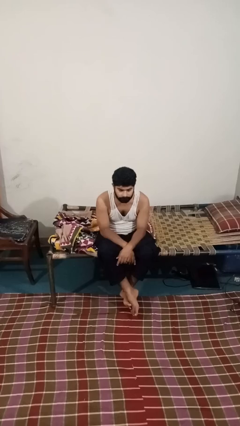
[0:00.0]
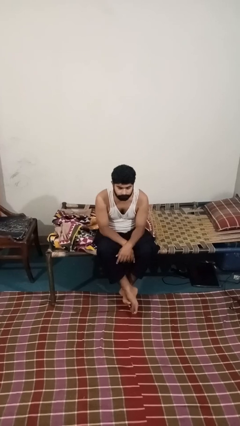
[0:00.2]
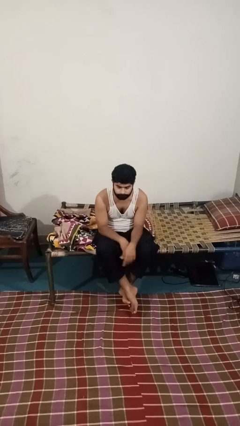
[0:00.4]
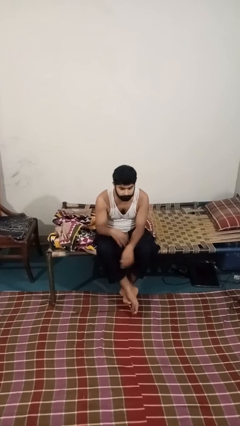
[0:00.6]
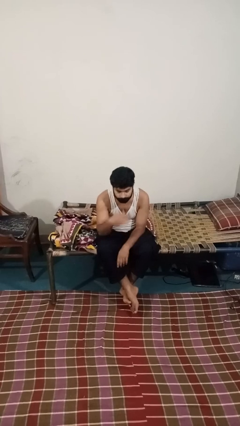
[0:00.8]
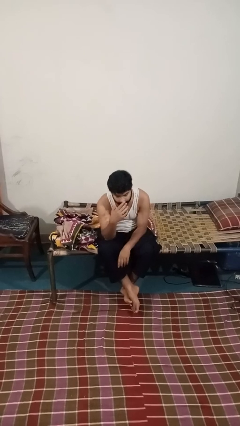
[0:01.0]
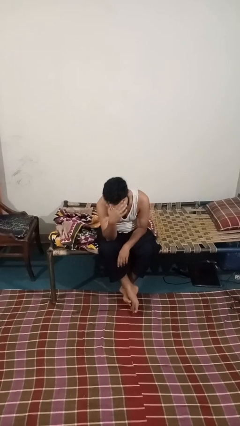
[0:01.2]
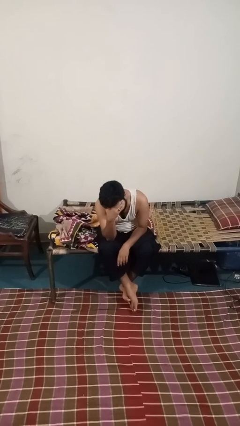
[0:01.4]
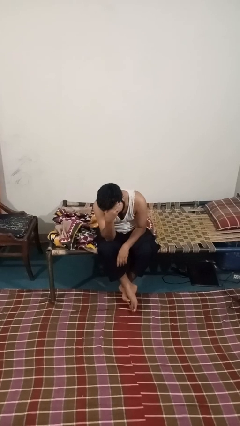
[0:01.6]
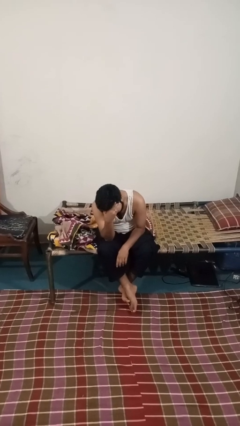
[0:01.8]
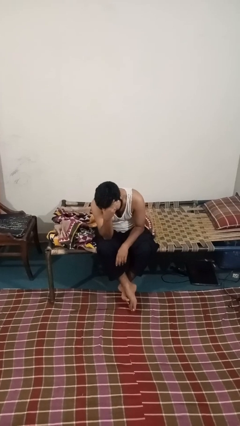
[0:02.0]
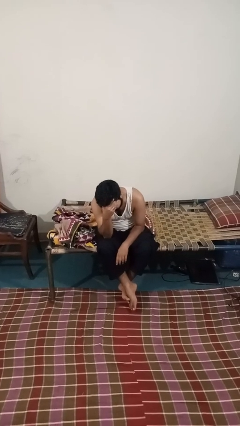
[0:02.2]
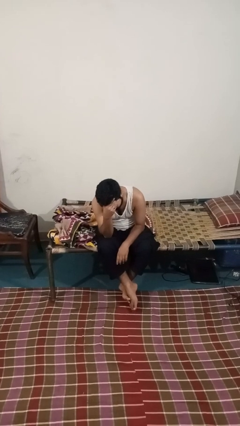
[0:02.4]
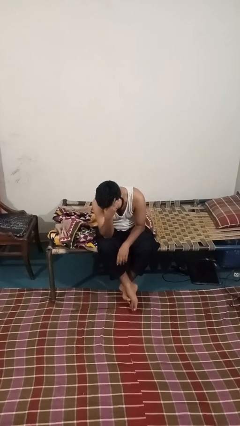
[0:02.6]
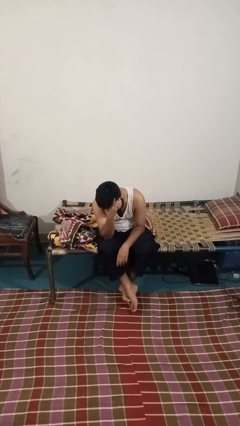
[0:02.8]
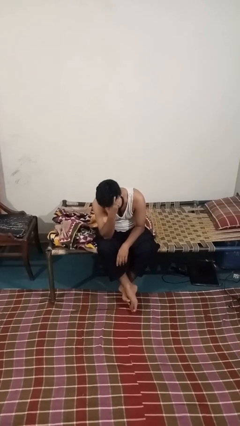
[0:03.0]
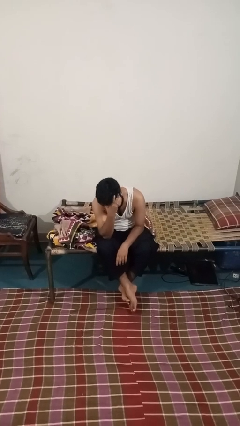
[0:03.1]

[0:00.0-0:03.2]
person covers face with hands

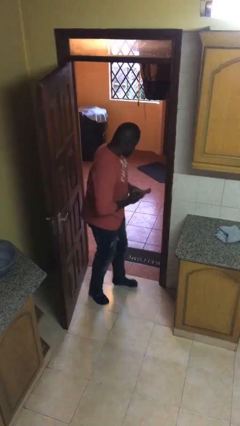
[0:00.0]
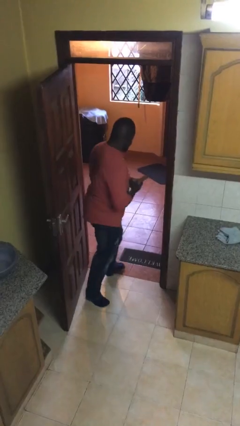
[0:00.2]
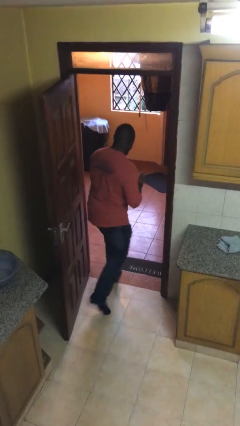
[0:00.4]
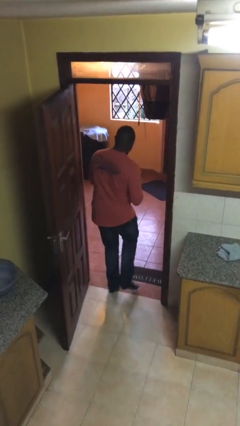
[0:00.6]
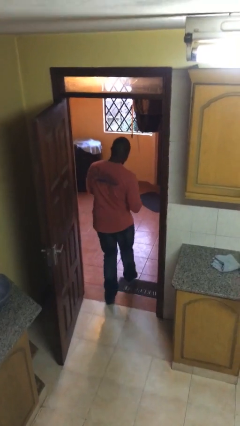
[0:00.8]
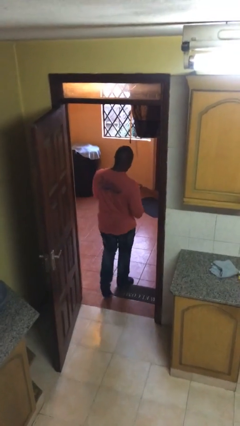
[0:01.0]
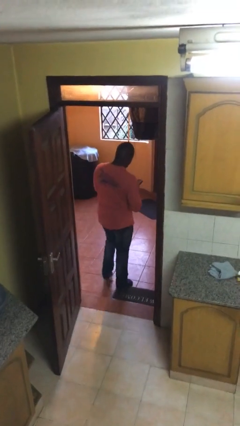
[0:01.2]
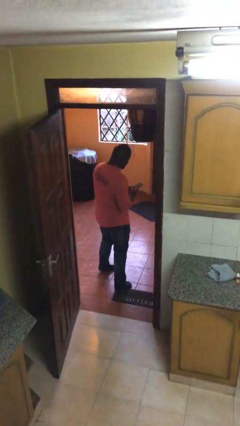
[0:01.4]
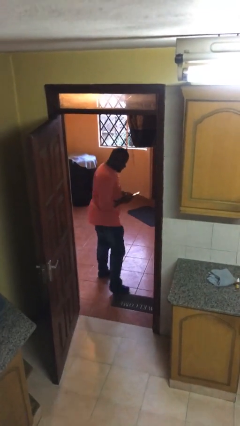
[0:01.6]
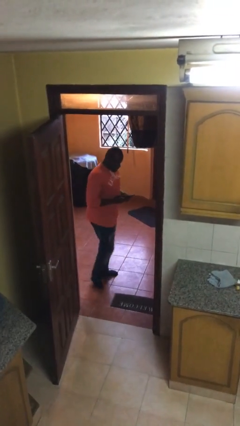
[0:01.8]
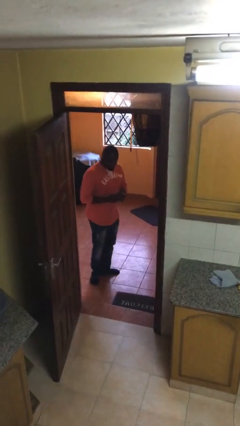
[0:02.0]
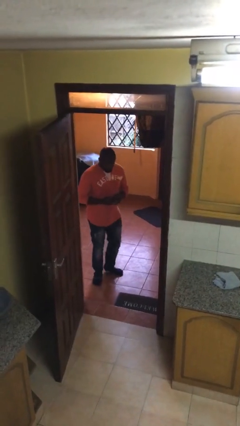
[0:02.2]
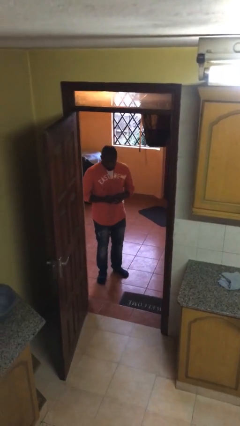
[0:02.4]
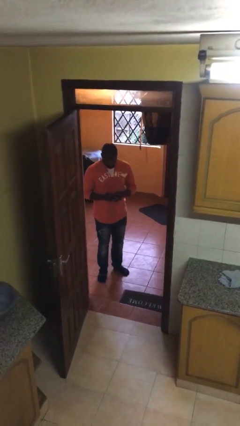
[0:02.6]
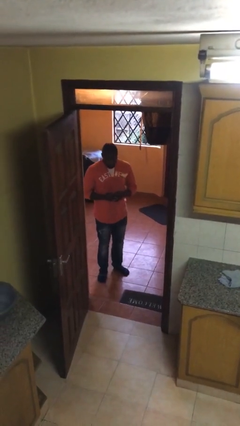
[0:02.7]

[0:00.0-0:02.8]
person exits scene through structure

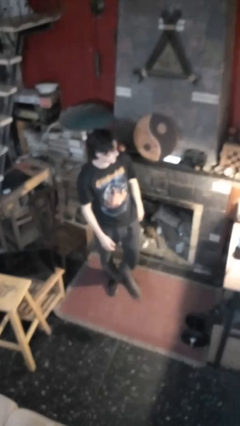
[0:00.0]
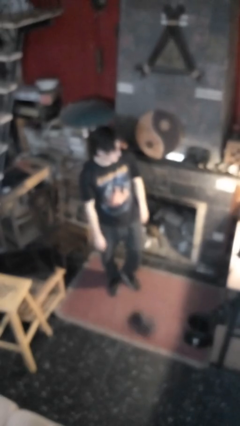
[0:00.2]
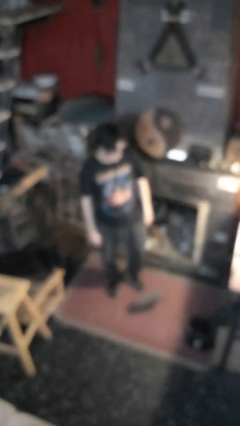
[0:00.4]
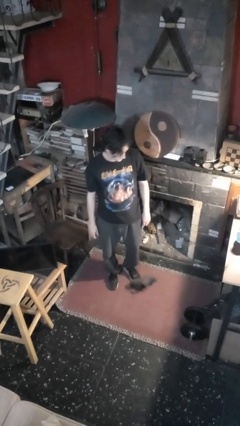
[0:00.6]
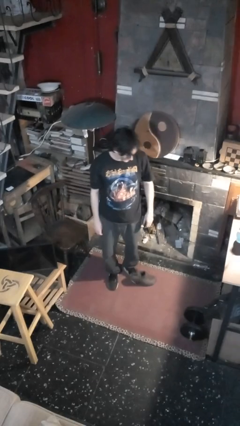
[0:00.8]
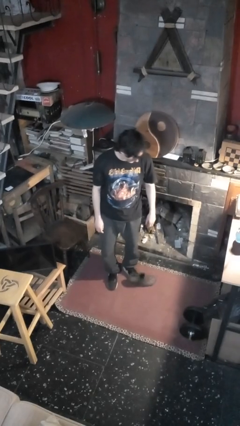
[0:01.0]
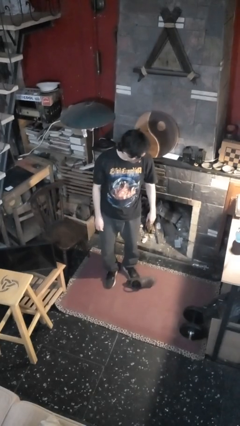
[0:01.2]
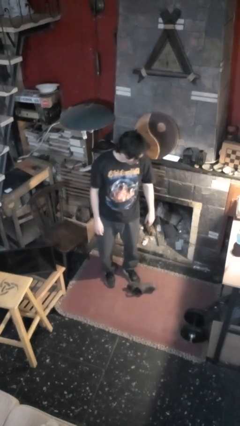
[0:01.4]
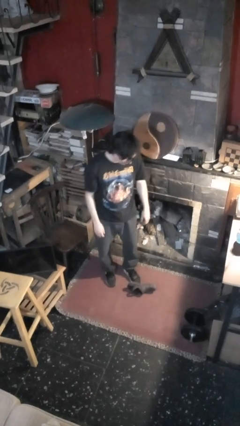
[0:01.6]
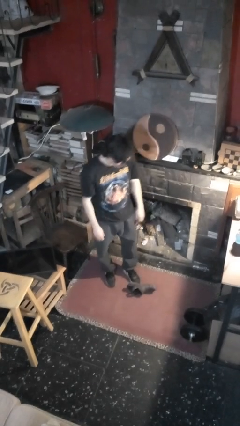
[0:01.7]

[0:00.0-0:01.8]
person drops object

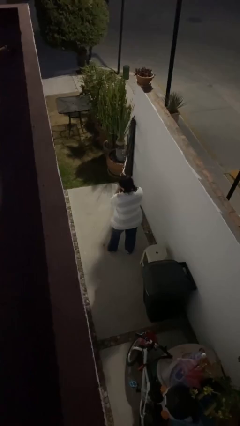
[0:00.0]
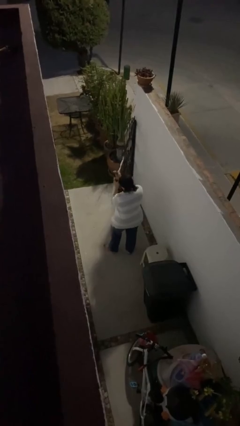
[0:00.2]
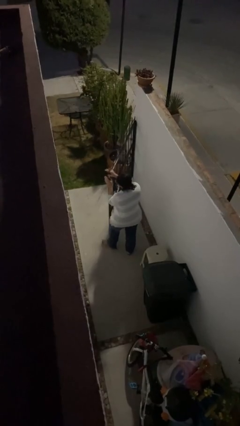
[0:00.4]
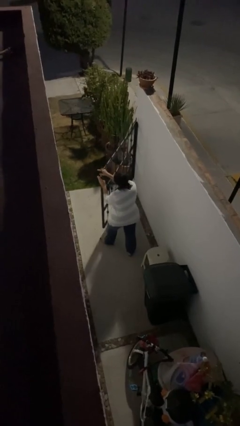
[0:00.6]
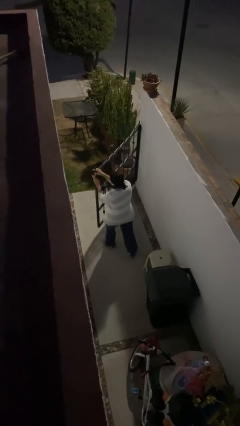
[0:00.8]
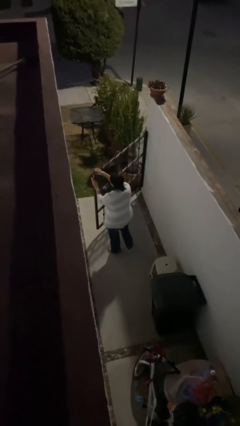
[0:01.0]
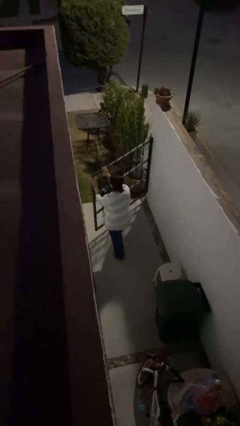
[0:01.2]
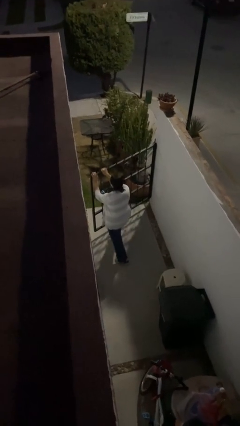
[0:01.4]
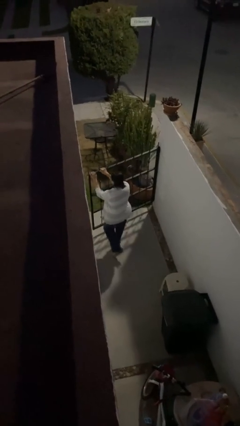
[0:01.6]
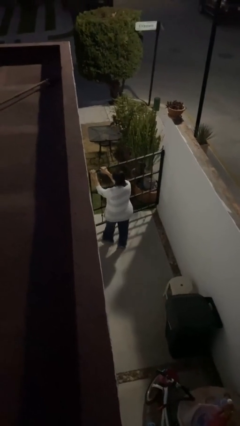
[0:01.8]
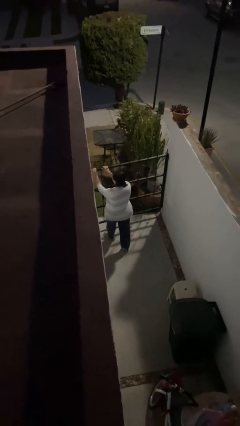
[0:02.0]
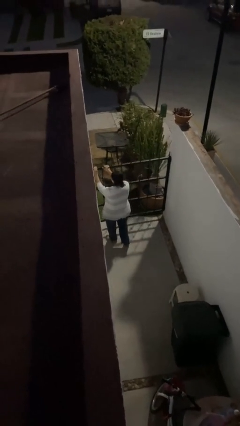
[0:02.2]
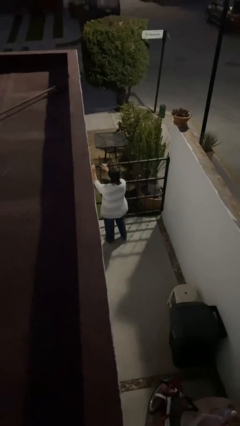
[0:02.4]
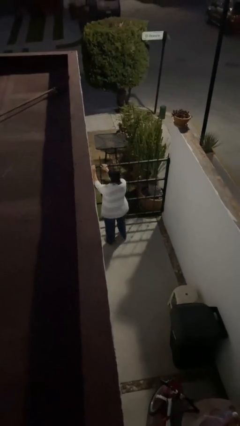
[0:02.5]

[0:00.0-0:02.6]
person closes facility door

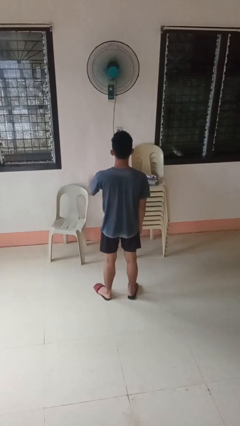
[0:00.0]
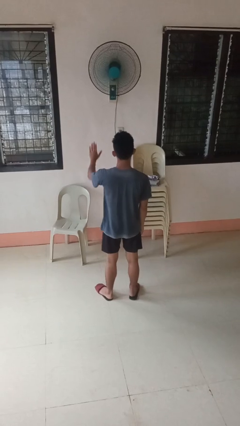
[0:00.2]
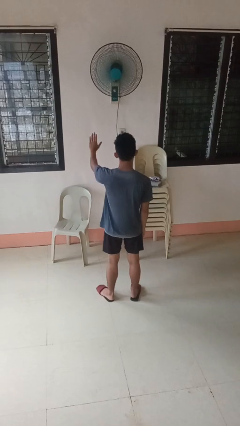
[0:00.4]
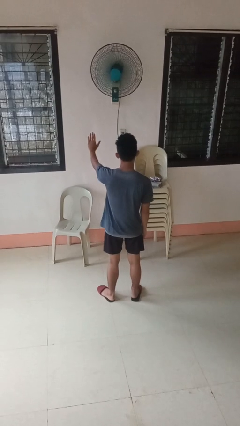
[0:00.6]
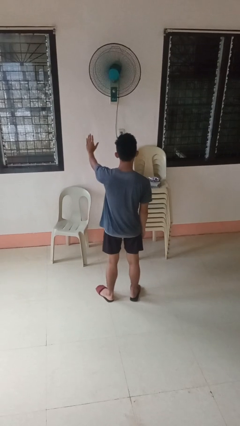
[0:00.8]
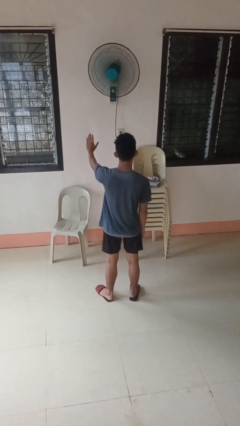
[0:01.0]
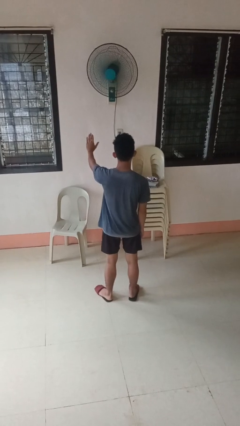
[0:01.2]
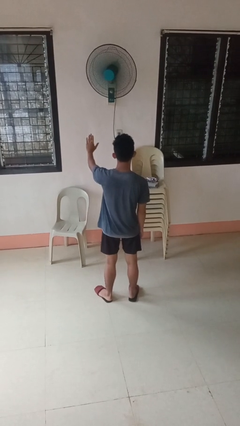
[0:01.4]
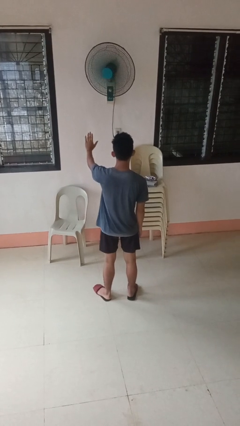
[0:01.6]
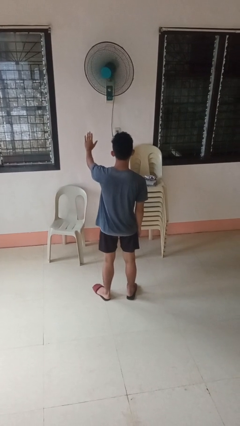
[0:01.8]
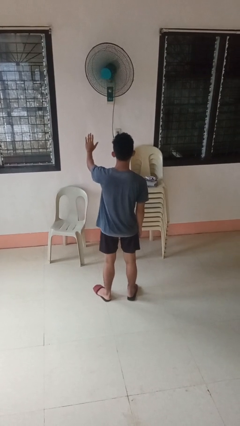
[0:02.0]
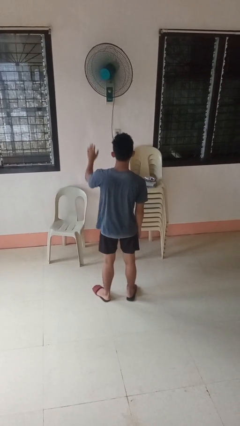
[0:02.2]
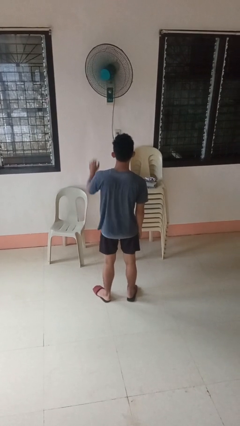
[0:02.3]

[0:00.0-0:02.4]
person gestures stop

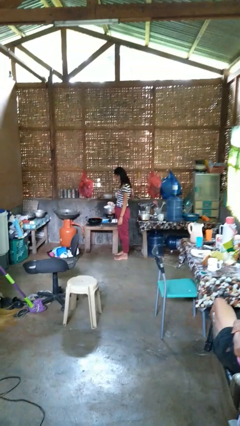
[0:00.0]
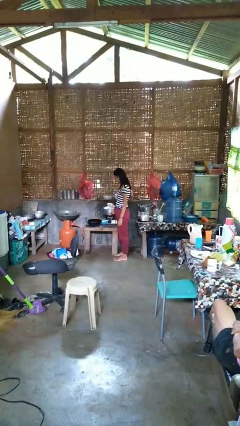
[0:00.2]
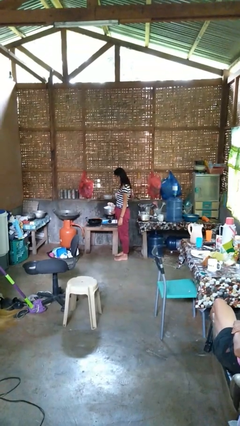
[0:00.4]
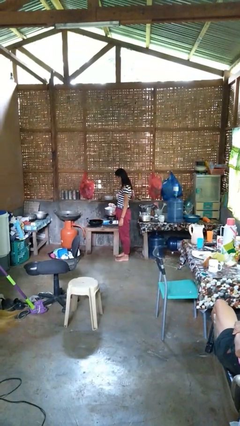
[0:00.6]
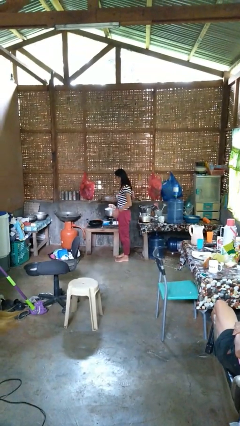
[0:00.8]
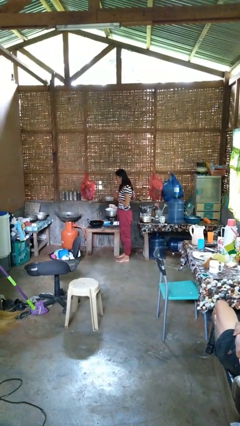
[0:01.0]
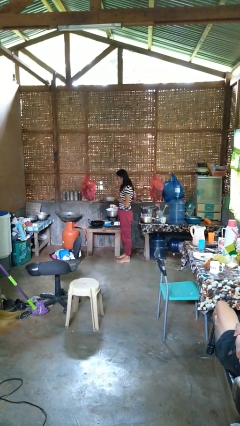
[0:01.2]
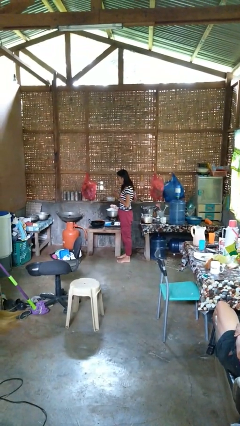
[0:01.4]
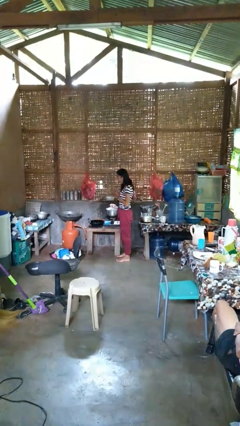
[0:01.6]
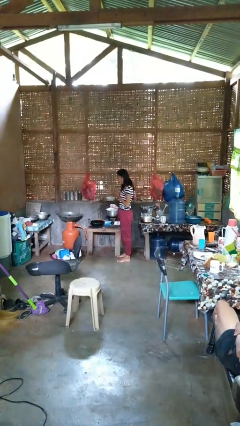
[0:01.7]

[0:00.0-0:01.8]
person burns hand

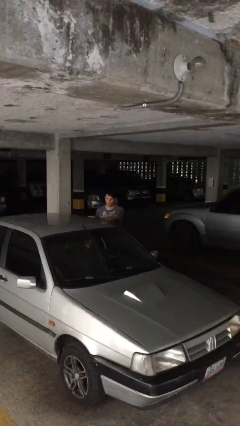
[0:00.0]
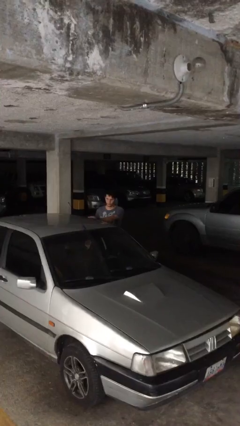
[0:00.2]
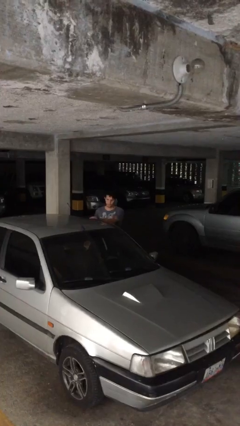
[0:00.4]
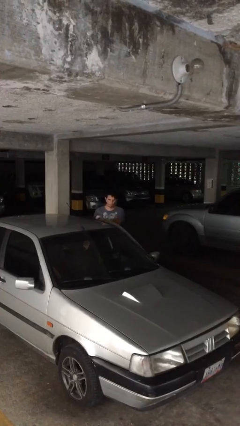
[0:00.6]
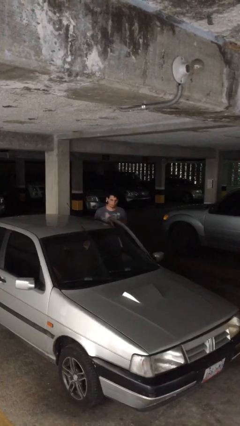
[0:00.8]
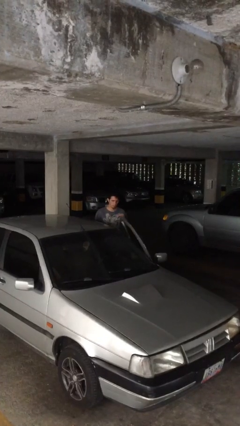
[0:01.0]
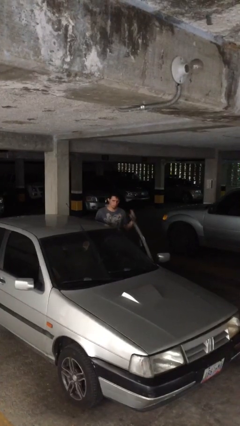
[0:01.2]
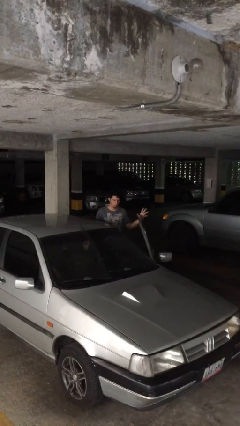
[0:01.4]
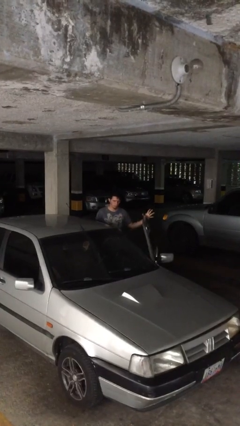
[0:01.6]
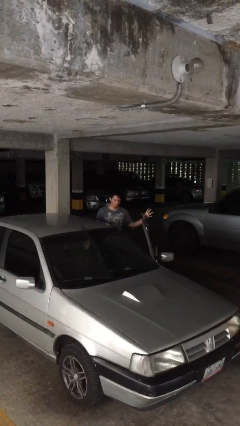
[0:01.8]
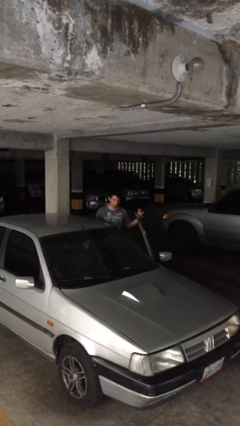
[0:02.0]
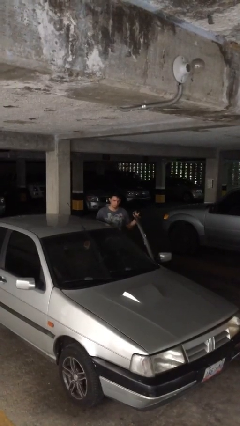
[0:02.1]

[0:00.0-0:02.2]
person opens car door

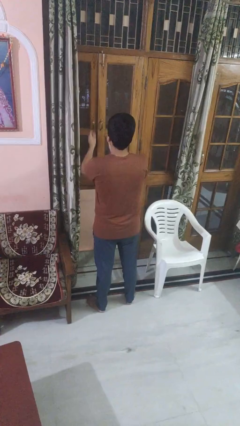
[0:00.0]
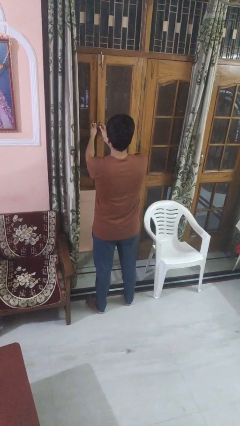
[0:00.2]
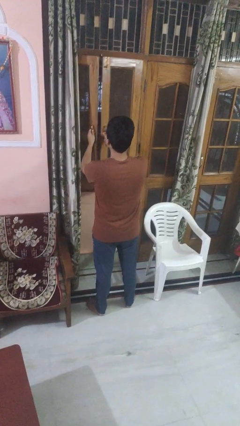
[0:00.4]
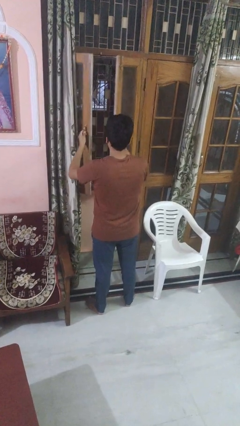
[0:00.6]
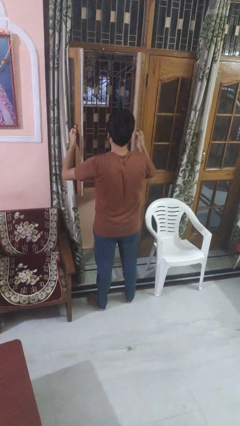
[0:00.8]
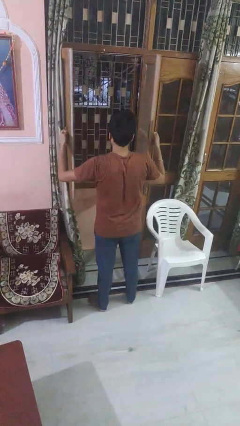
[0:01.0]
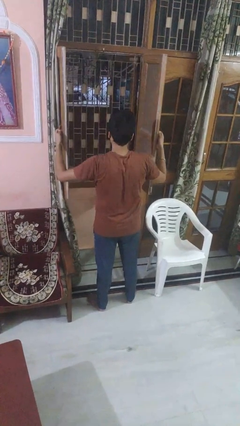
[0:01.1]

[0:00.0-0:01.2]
person opens home window
